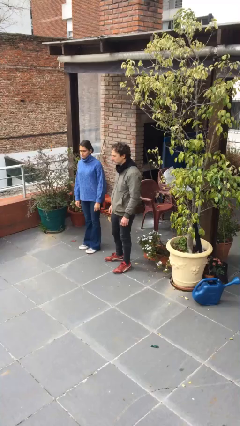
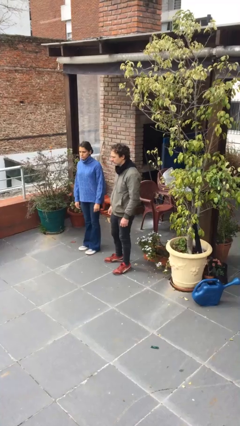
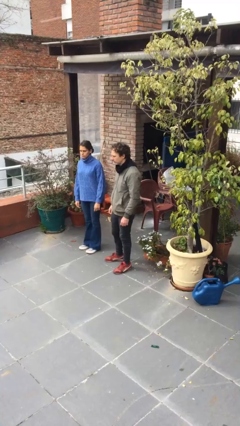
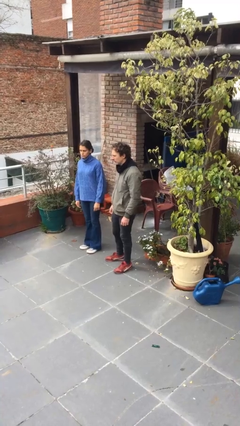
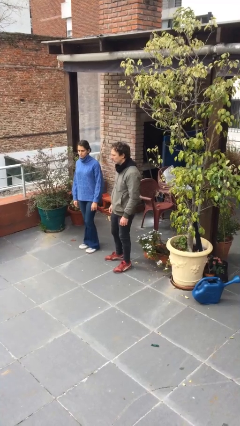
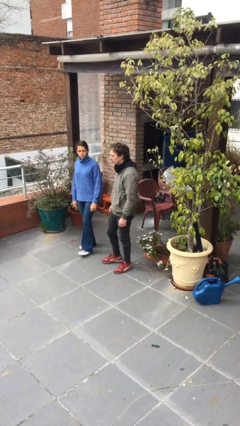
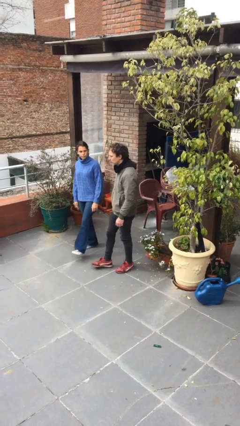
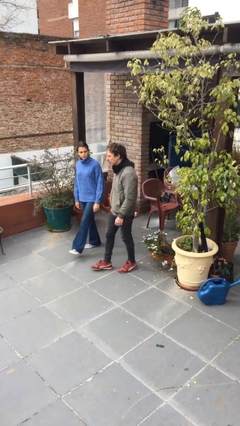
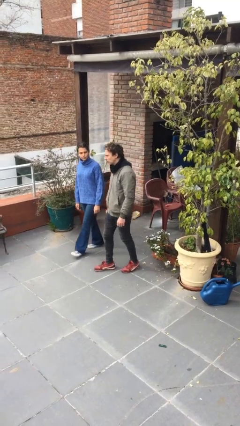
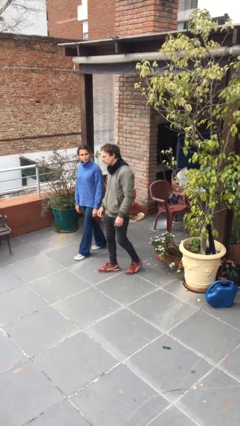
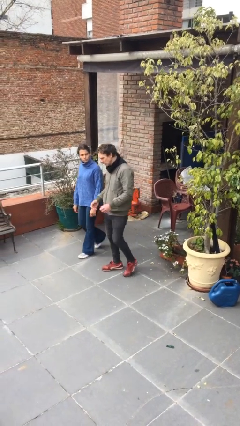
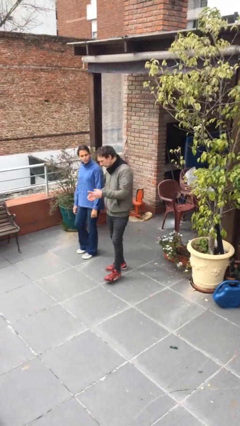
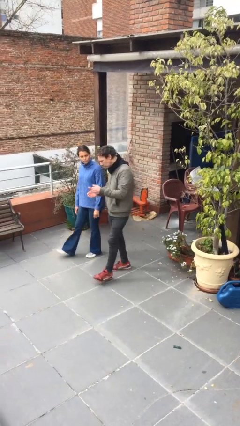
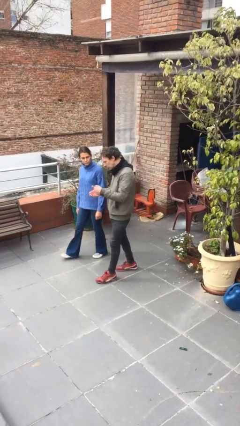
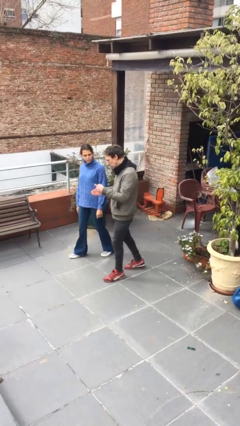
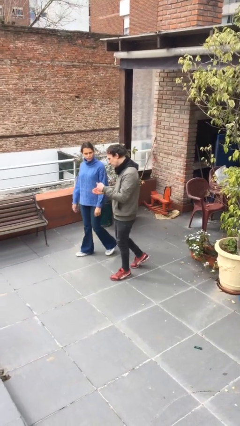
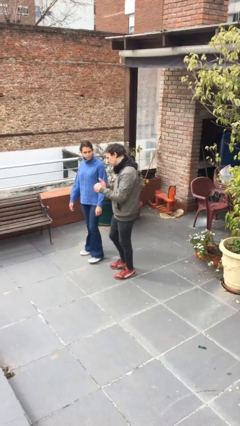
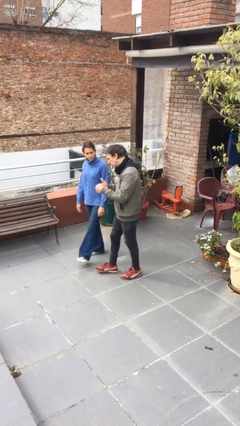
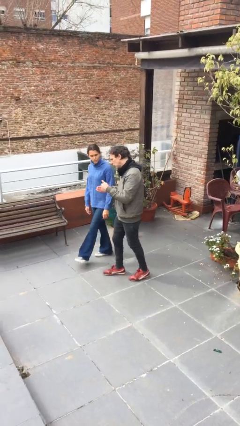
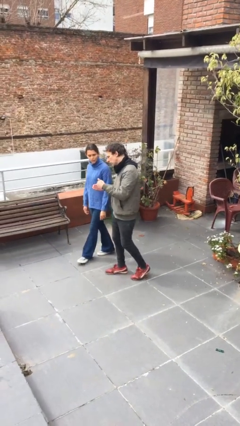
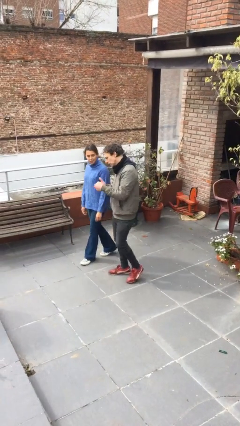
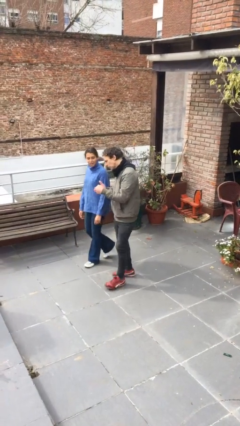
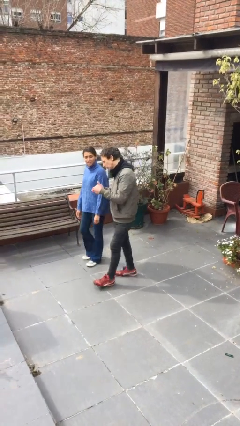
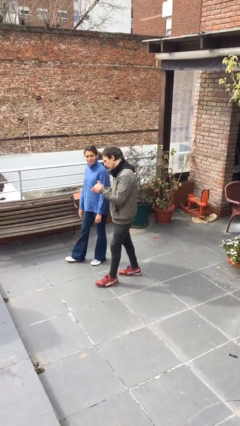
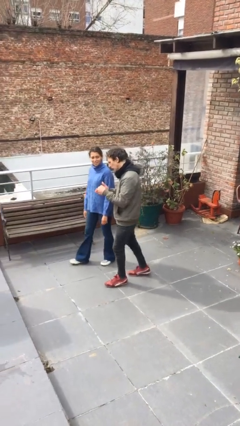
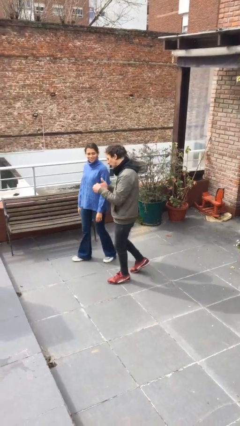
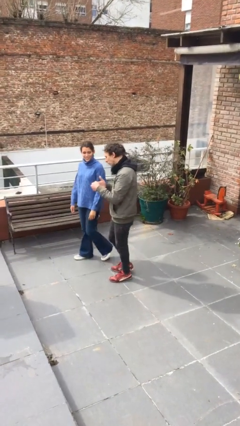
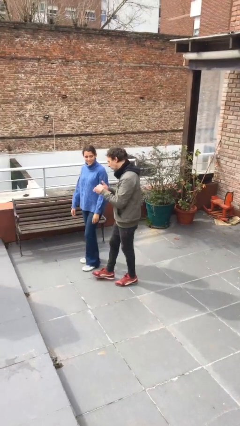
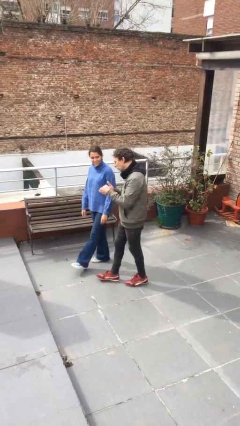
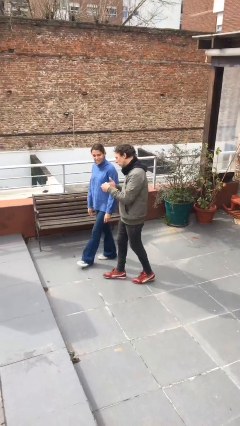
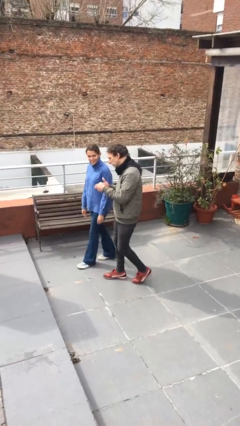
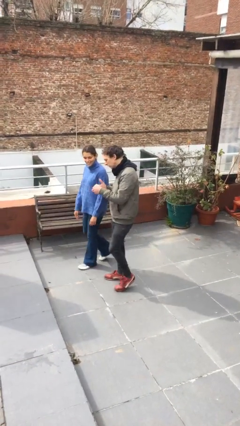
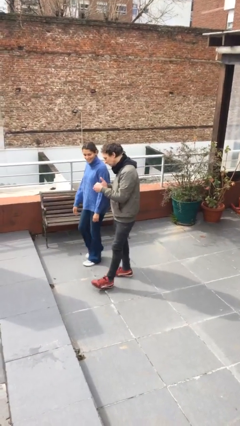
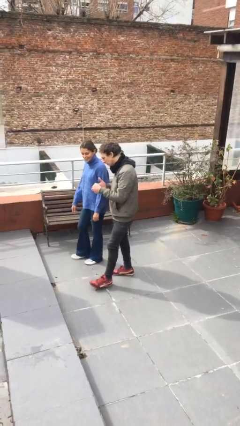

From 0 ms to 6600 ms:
person talks to person

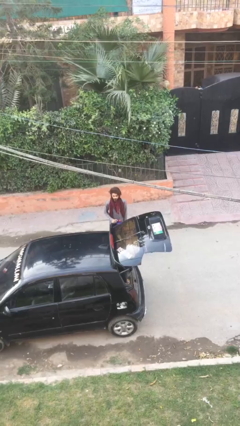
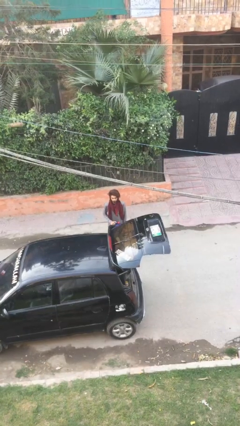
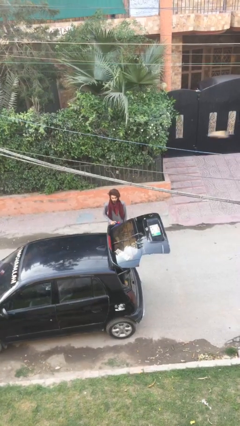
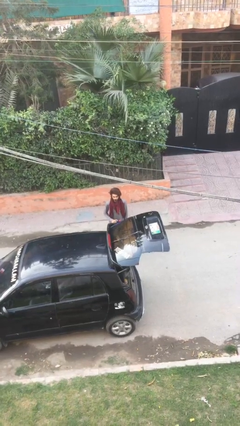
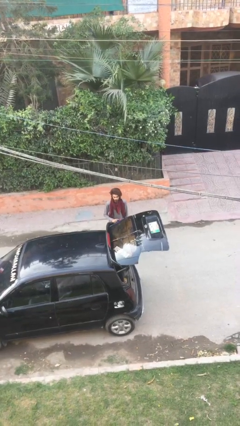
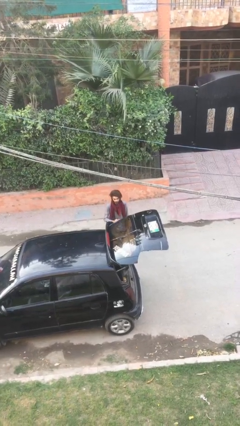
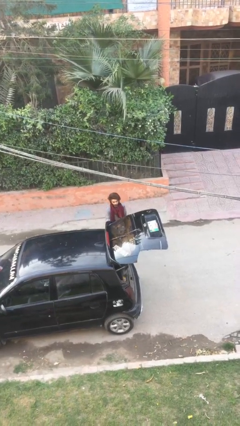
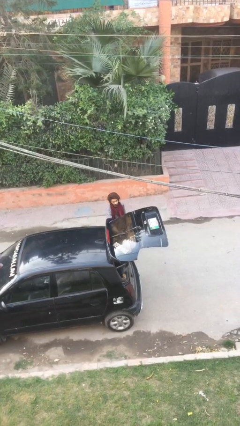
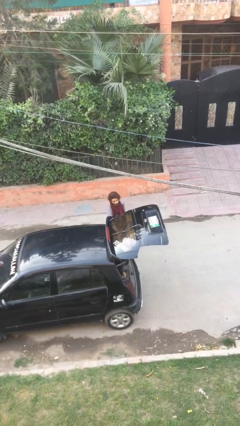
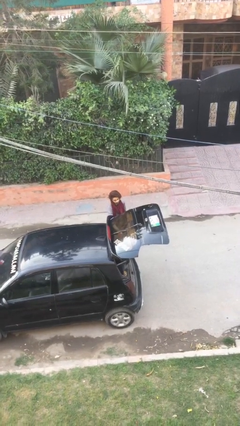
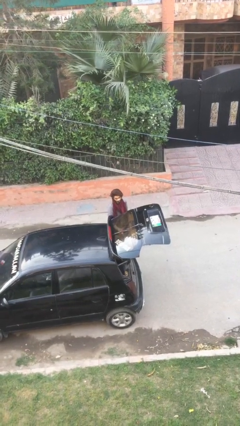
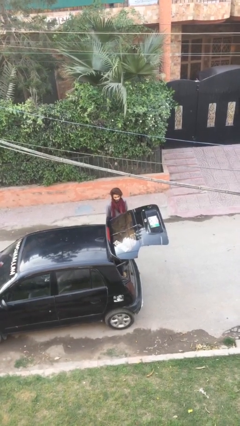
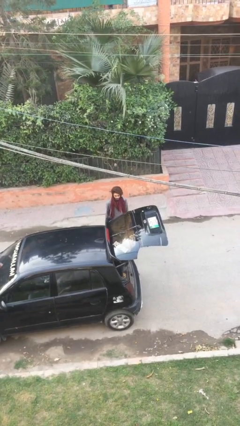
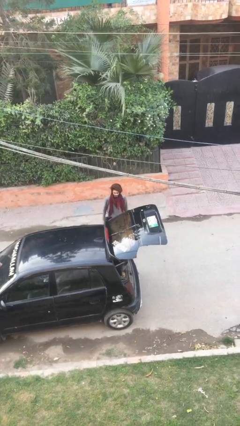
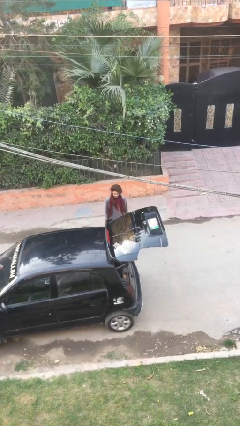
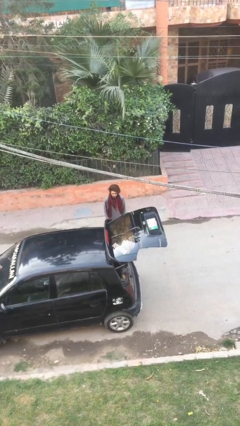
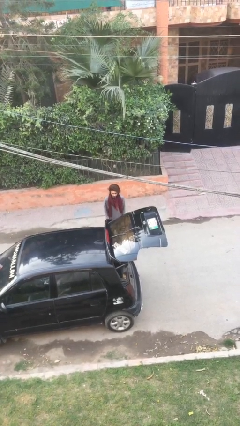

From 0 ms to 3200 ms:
person loads car

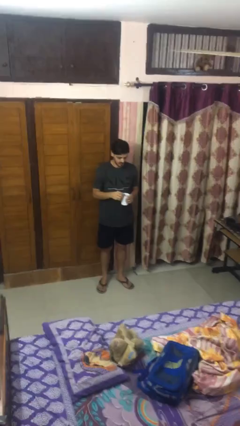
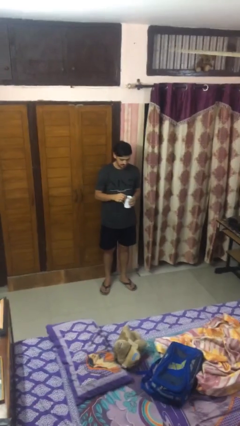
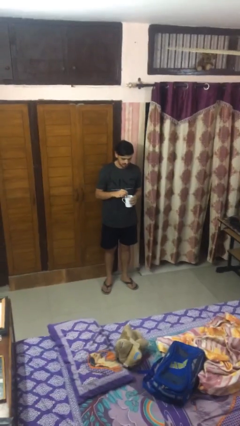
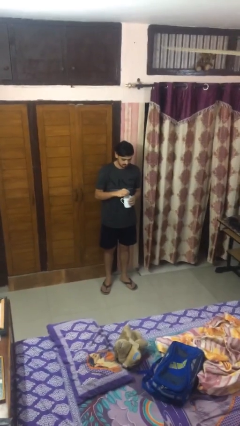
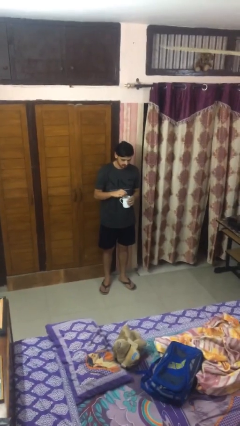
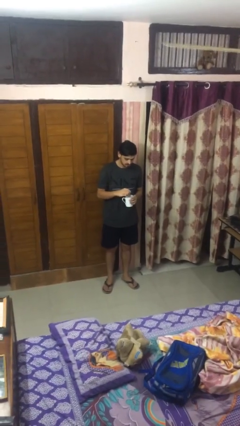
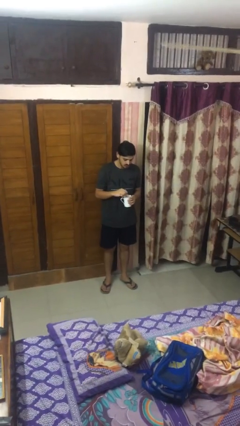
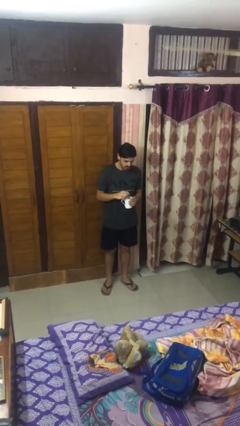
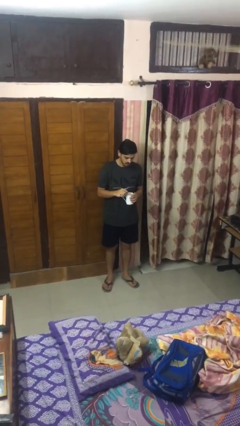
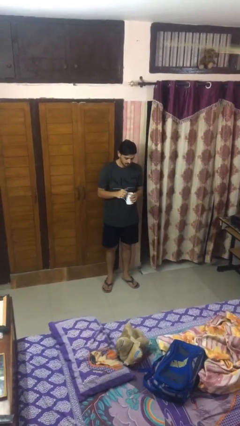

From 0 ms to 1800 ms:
person stirs mug

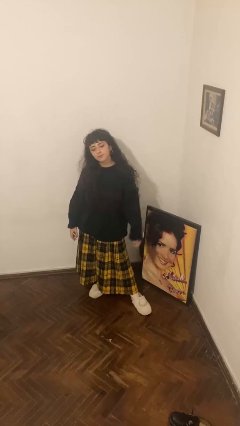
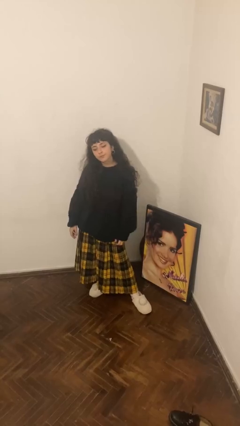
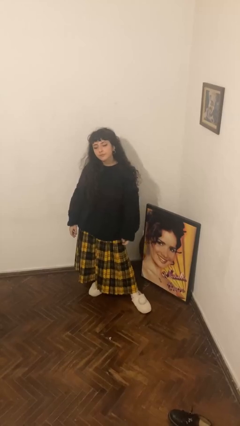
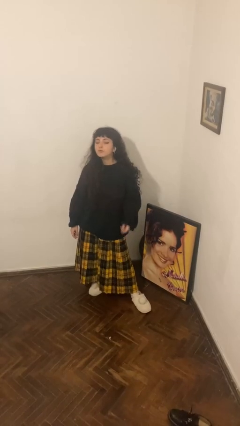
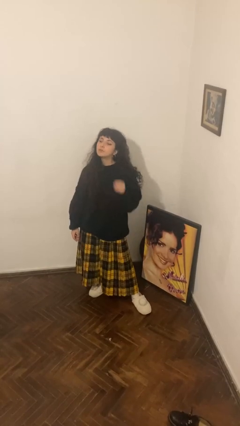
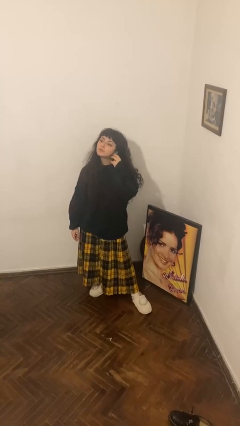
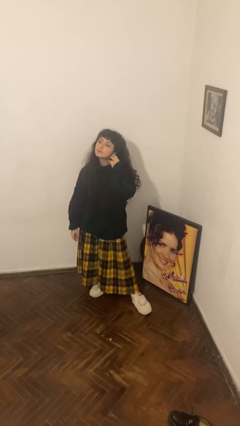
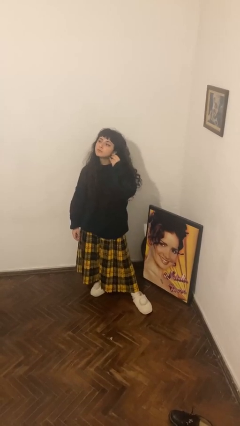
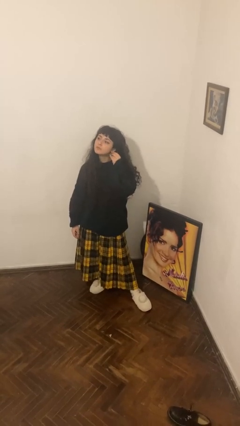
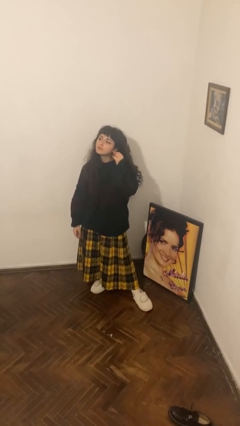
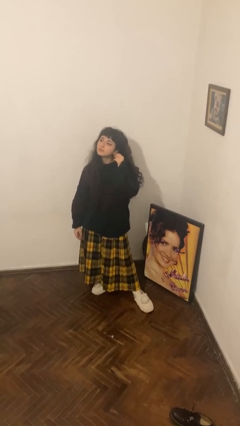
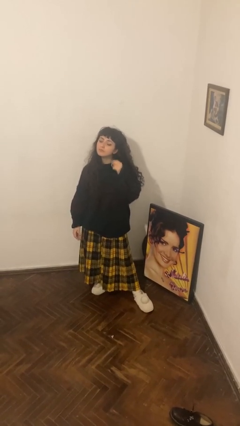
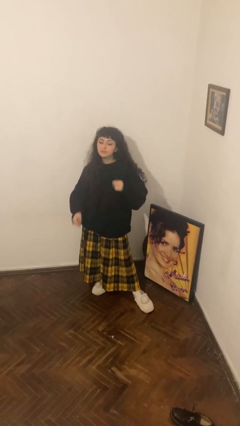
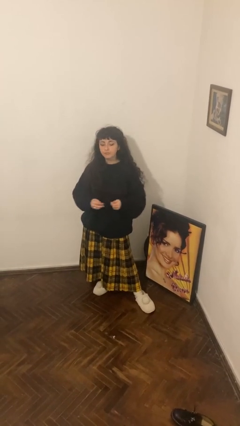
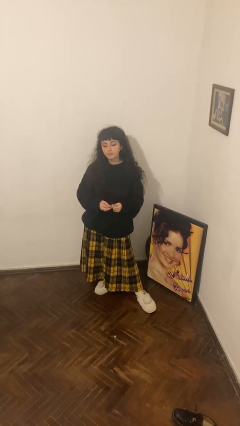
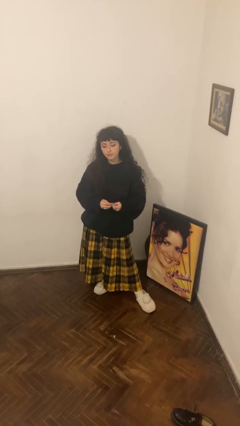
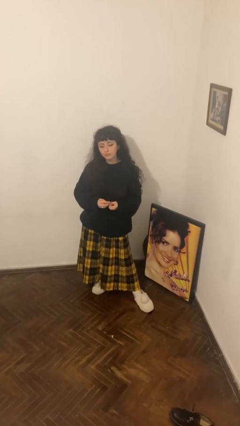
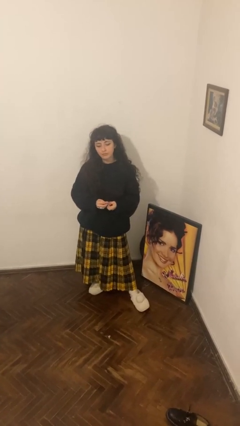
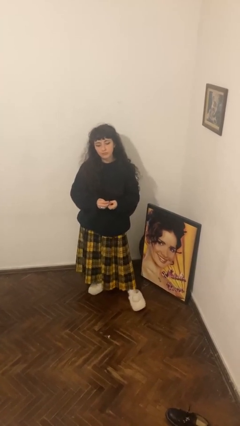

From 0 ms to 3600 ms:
person takes off earrings

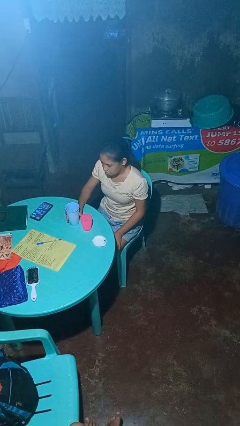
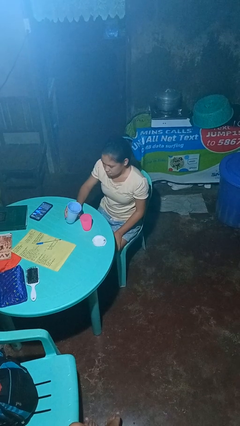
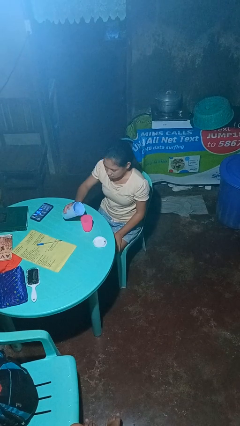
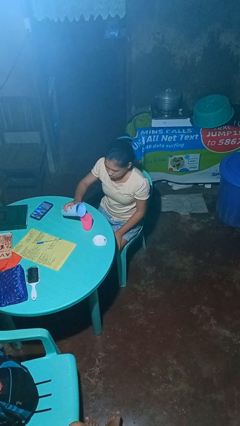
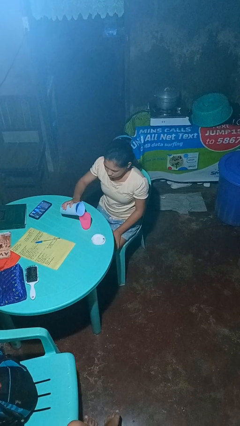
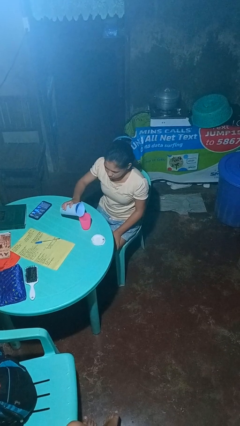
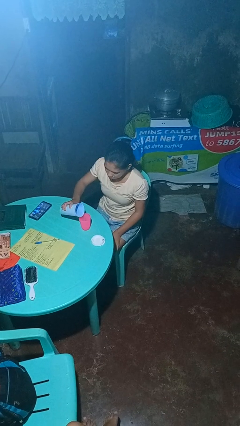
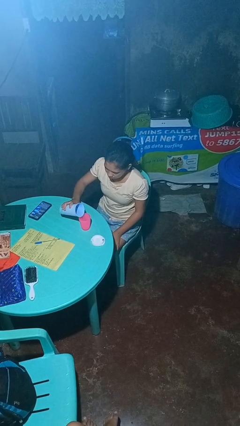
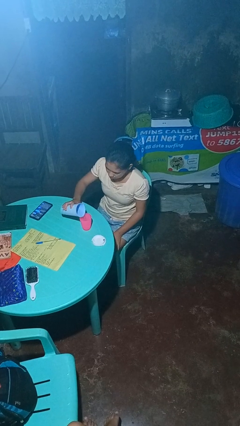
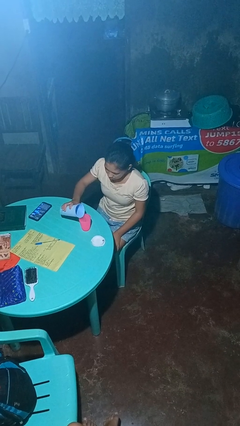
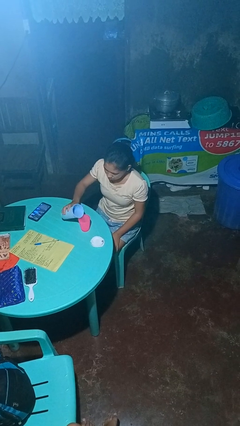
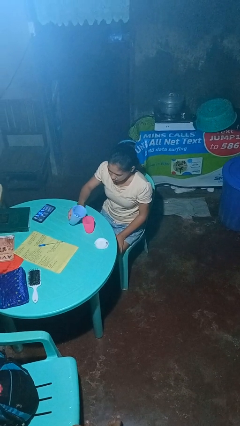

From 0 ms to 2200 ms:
person pours liquid into cup
